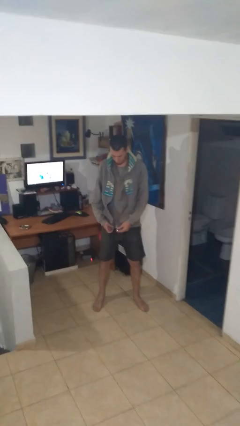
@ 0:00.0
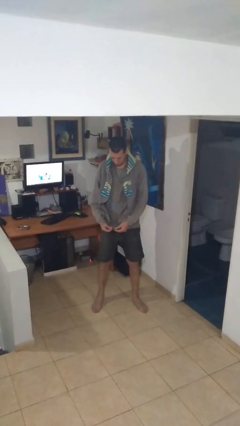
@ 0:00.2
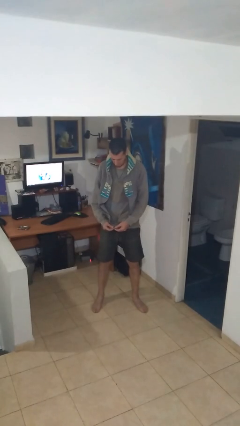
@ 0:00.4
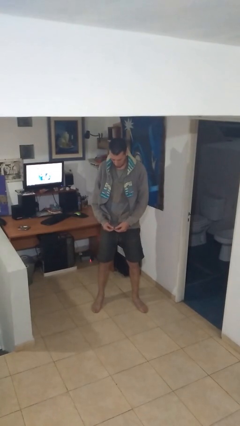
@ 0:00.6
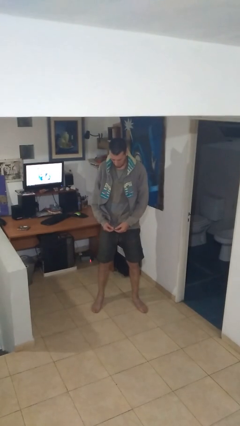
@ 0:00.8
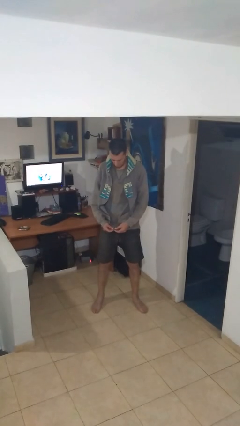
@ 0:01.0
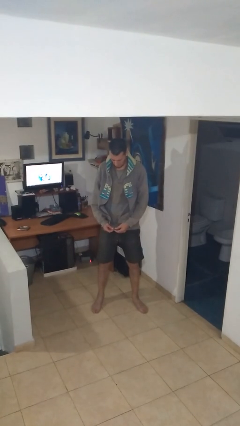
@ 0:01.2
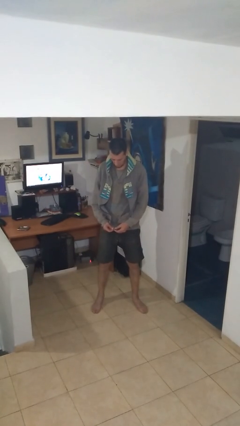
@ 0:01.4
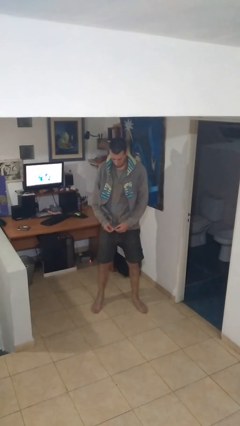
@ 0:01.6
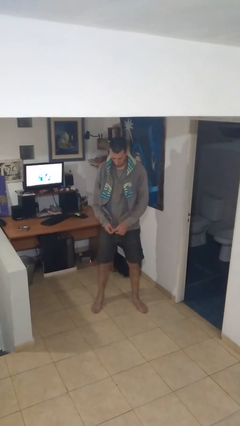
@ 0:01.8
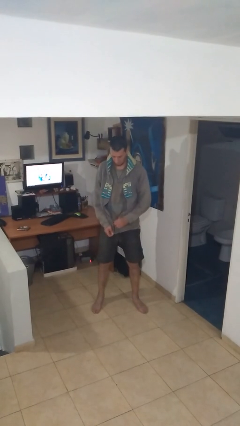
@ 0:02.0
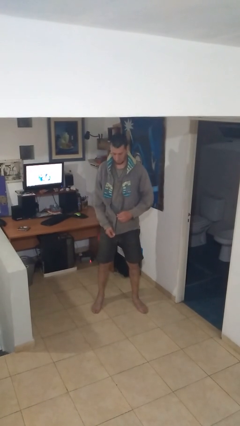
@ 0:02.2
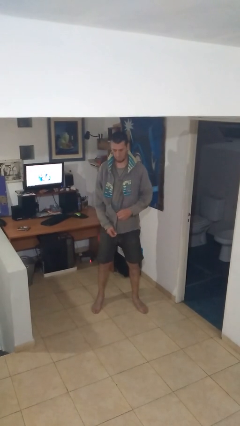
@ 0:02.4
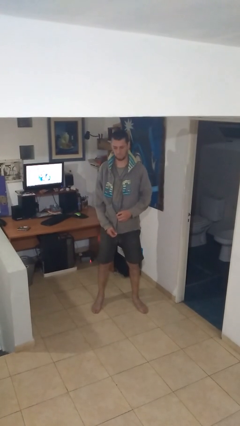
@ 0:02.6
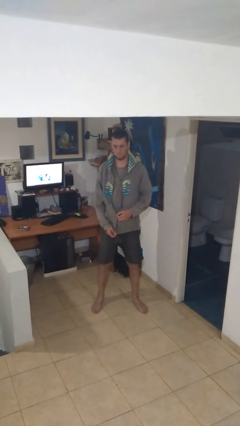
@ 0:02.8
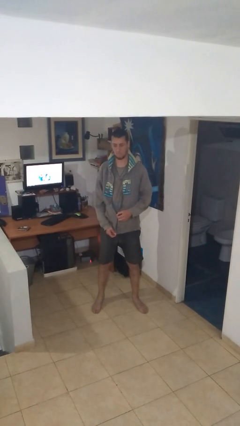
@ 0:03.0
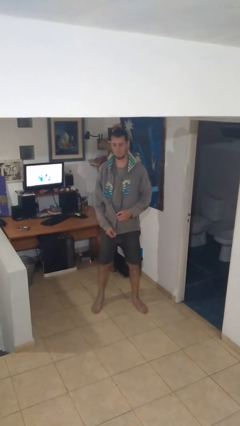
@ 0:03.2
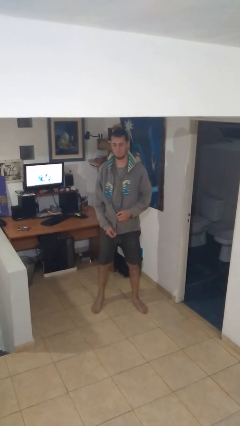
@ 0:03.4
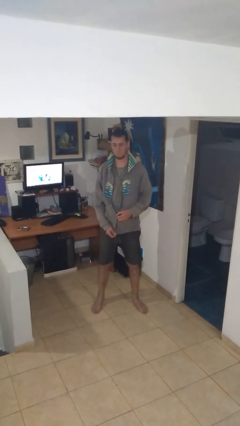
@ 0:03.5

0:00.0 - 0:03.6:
person zips up jacket

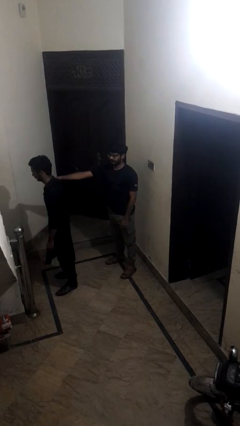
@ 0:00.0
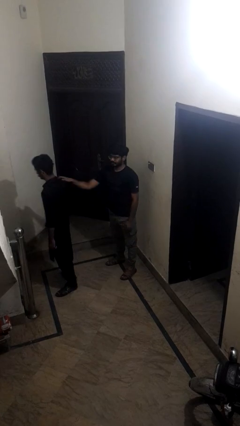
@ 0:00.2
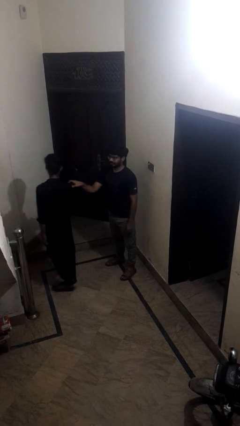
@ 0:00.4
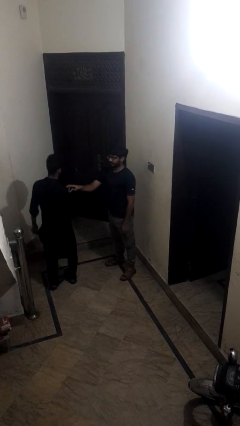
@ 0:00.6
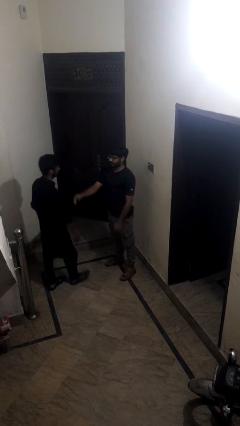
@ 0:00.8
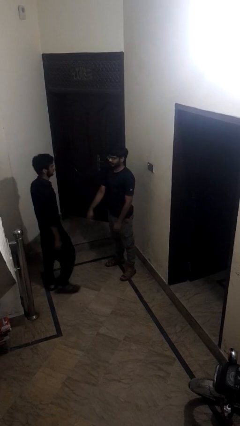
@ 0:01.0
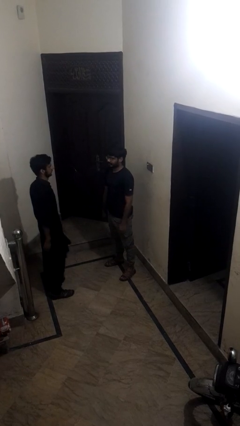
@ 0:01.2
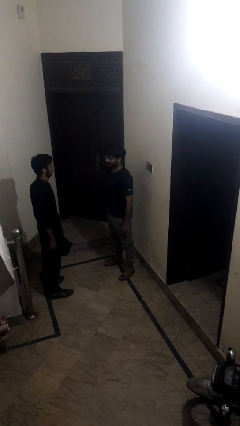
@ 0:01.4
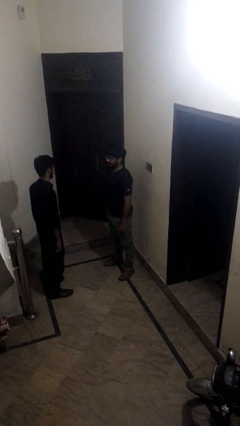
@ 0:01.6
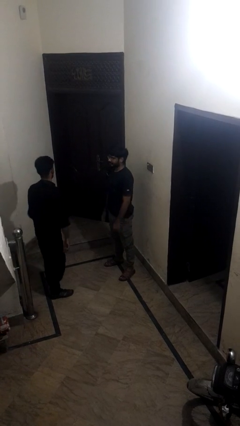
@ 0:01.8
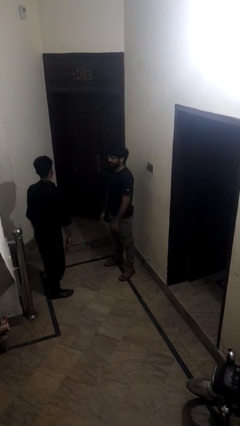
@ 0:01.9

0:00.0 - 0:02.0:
person spins person around

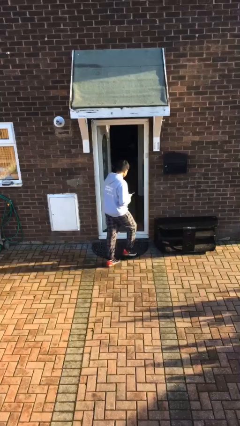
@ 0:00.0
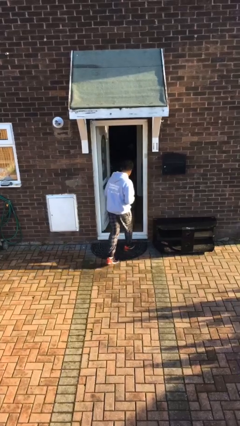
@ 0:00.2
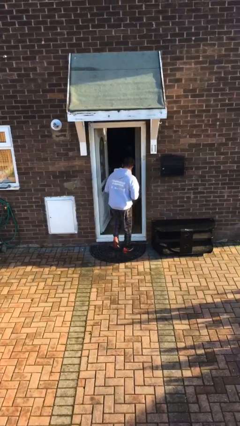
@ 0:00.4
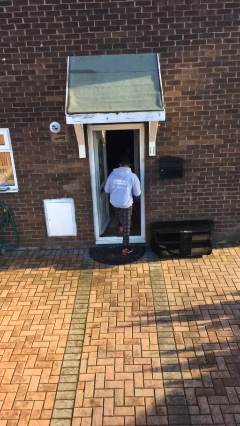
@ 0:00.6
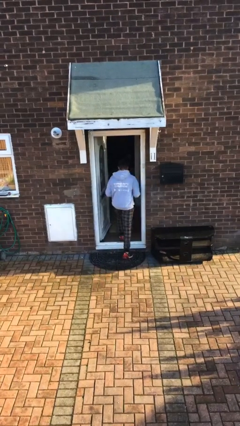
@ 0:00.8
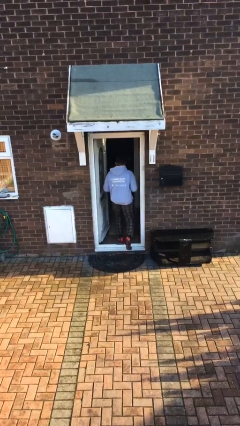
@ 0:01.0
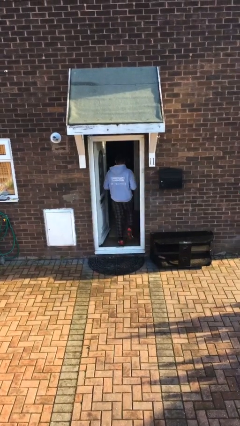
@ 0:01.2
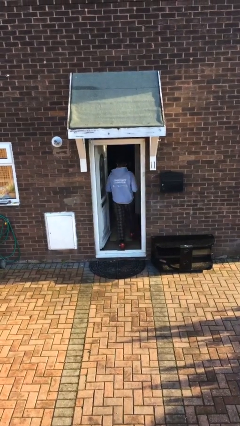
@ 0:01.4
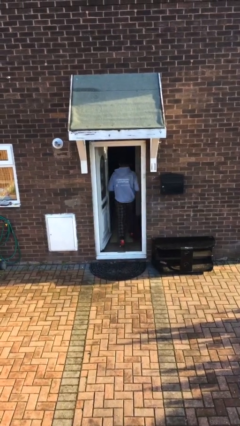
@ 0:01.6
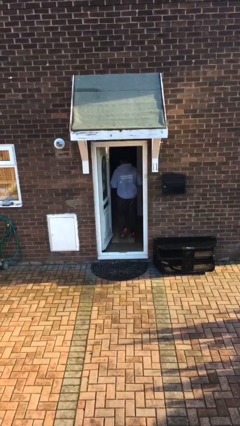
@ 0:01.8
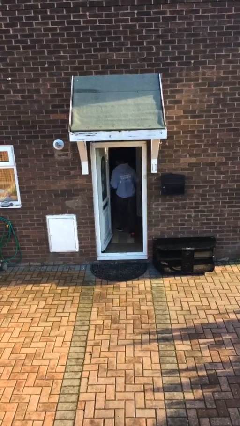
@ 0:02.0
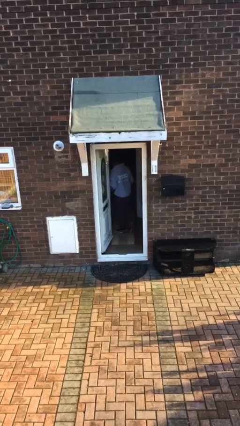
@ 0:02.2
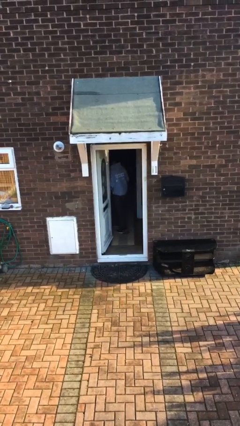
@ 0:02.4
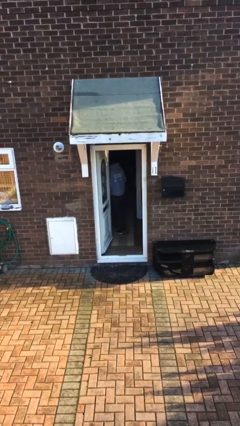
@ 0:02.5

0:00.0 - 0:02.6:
person exits scene through structure

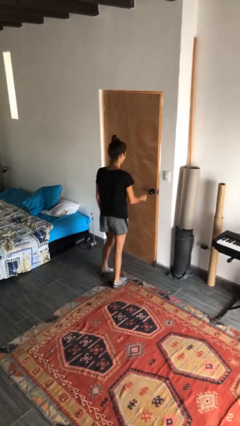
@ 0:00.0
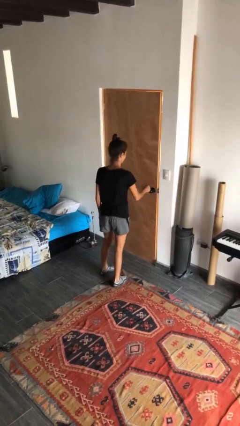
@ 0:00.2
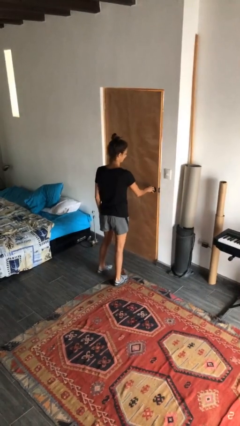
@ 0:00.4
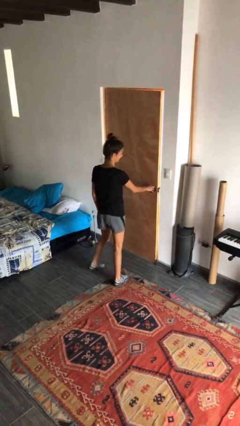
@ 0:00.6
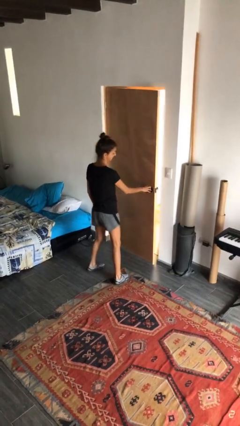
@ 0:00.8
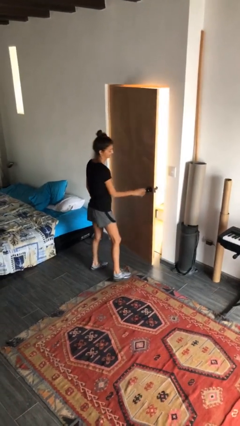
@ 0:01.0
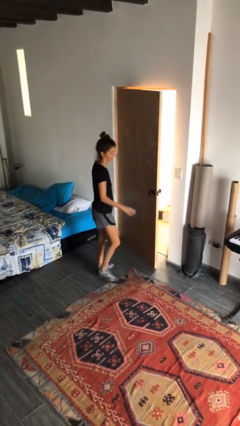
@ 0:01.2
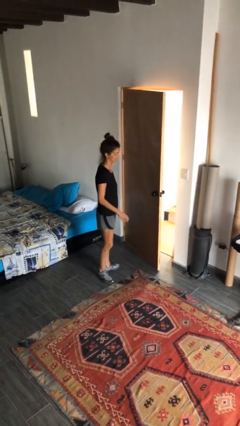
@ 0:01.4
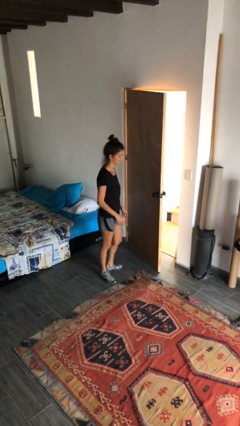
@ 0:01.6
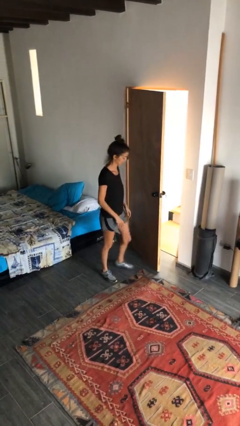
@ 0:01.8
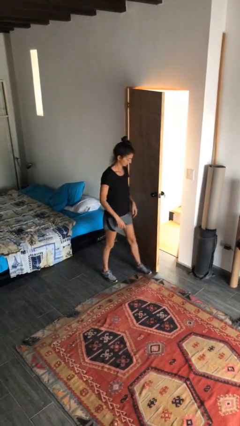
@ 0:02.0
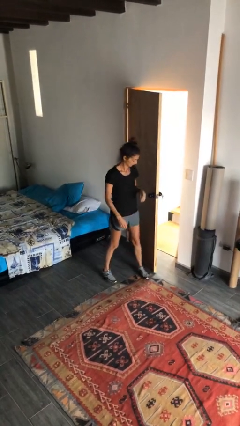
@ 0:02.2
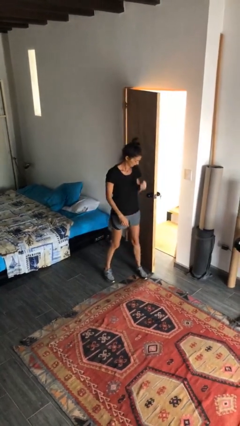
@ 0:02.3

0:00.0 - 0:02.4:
person opens facility door

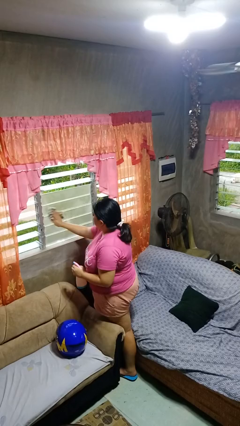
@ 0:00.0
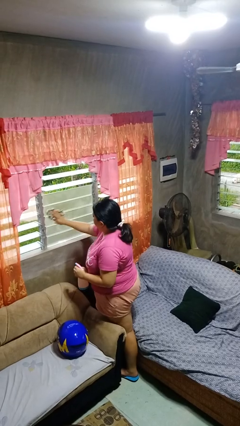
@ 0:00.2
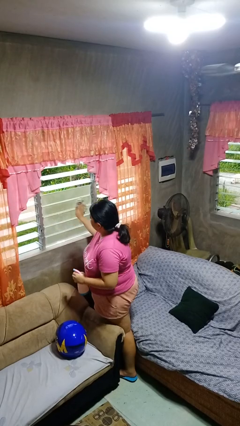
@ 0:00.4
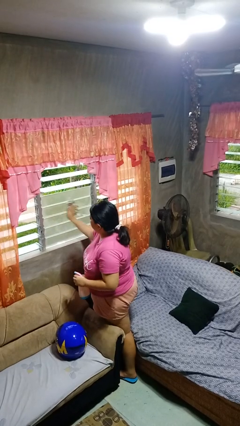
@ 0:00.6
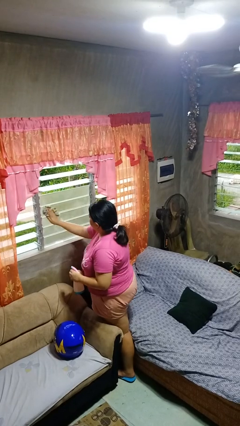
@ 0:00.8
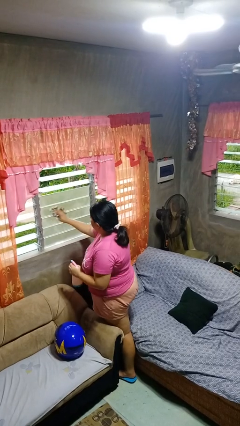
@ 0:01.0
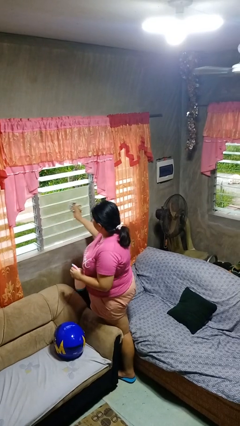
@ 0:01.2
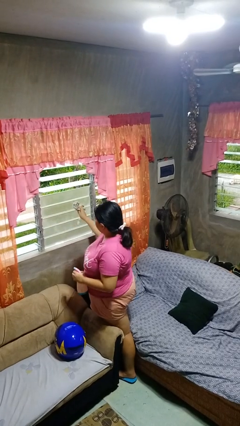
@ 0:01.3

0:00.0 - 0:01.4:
person washes window

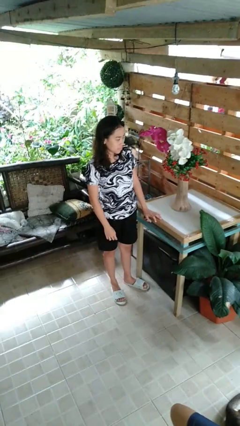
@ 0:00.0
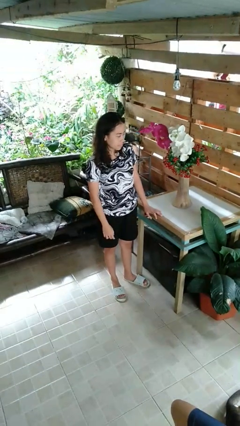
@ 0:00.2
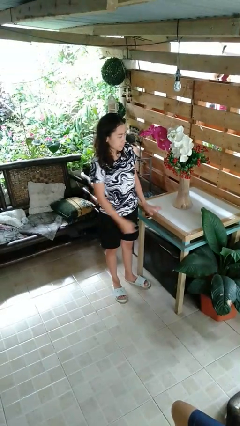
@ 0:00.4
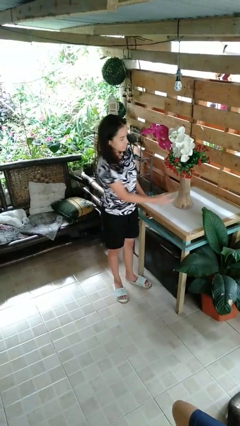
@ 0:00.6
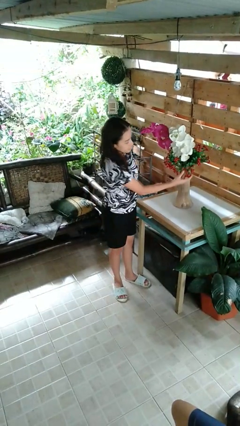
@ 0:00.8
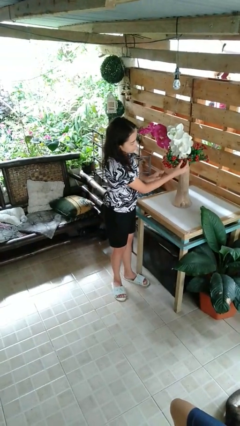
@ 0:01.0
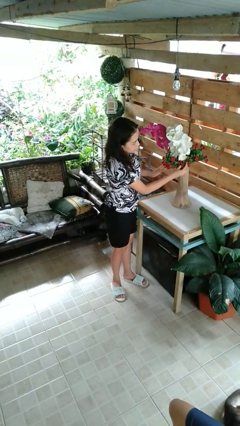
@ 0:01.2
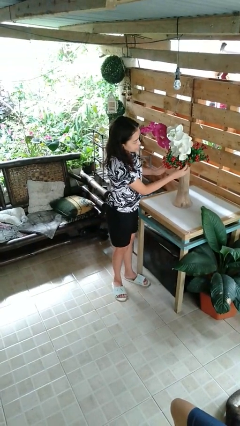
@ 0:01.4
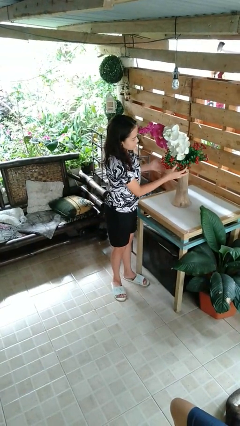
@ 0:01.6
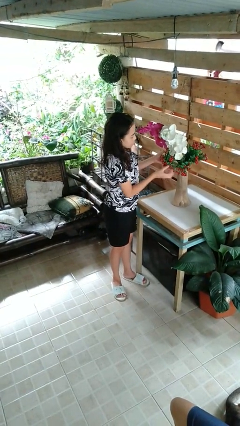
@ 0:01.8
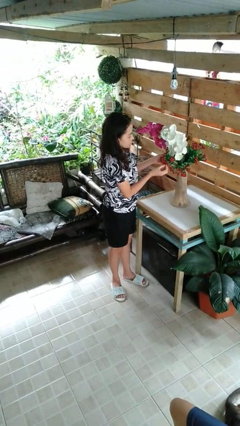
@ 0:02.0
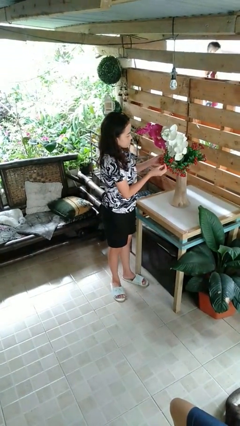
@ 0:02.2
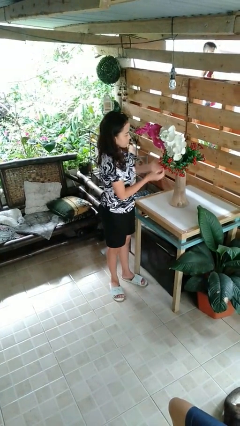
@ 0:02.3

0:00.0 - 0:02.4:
person arranges flowers in vase

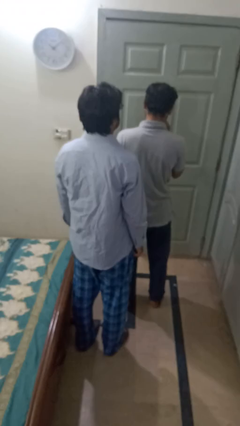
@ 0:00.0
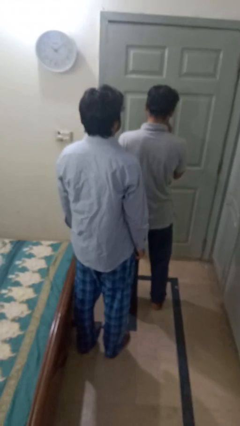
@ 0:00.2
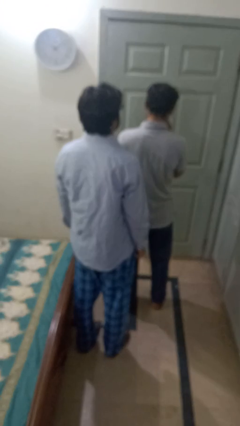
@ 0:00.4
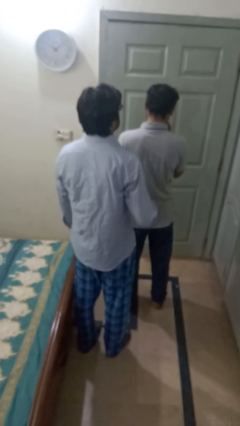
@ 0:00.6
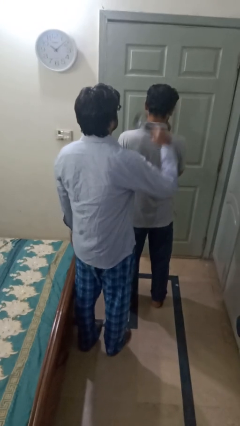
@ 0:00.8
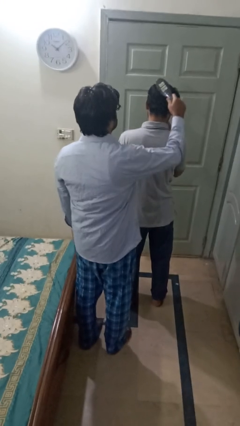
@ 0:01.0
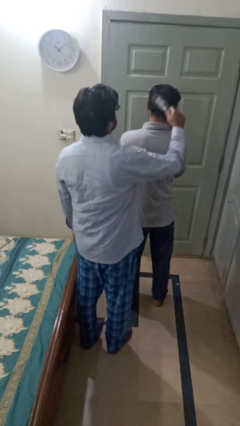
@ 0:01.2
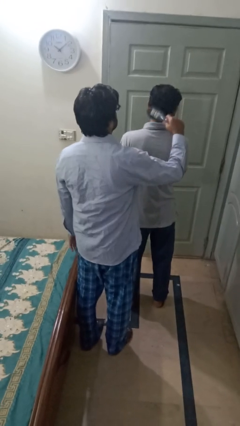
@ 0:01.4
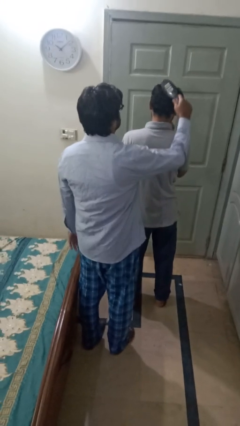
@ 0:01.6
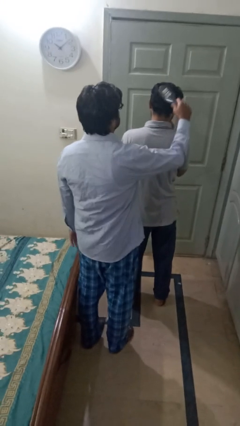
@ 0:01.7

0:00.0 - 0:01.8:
person brushes hair of person

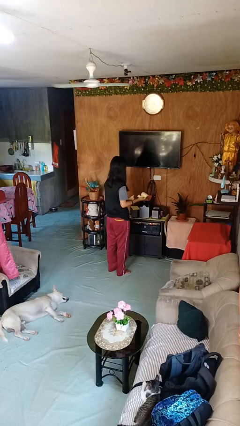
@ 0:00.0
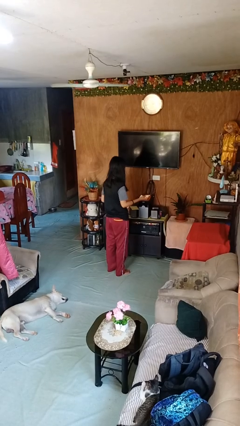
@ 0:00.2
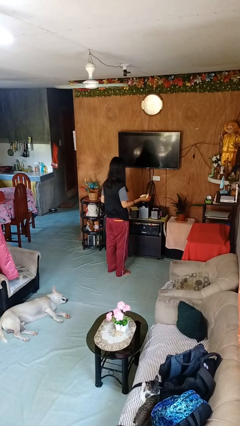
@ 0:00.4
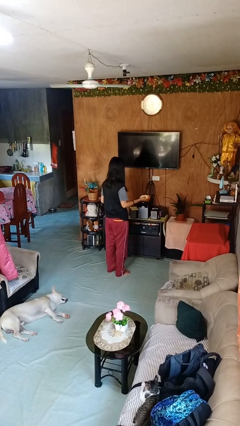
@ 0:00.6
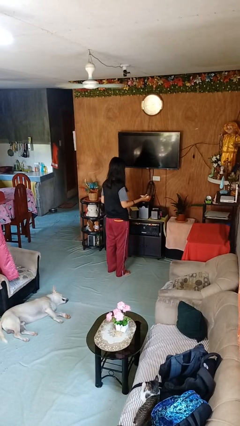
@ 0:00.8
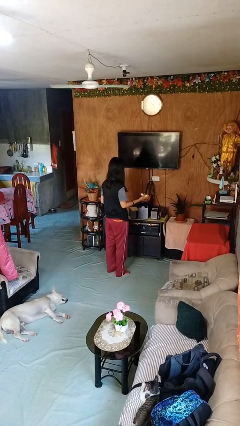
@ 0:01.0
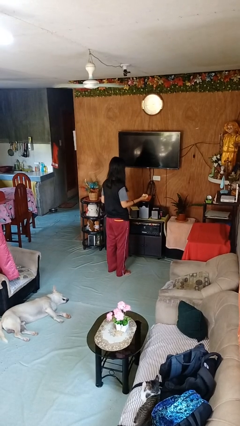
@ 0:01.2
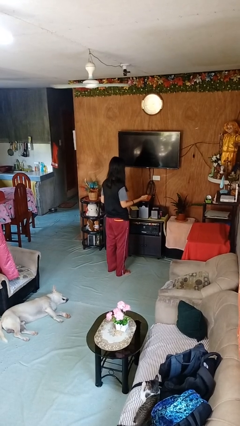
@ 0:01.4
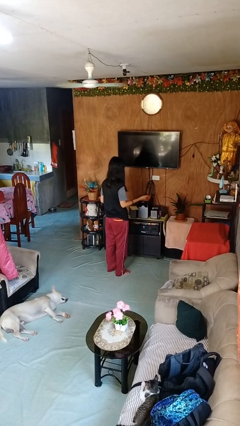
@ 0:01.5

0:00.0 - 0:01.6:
person crumples paper
